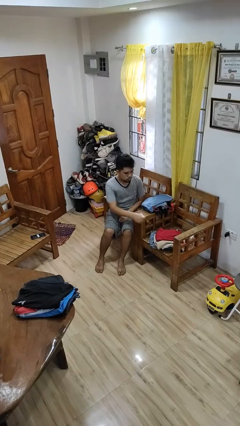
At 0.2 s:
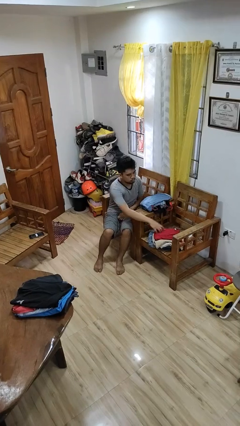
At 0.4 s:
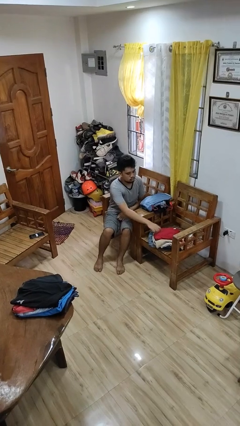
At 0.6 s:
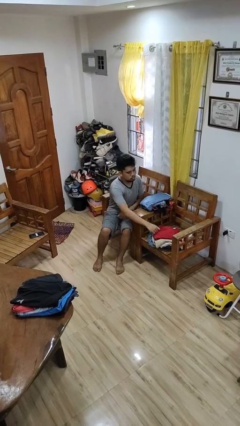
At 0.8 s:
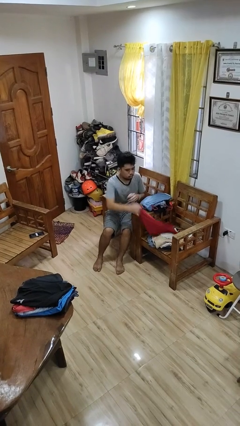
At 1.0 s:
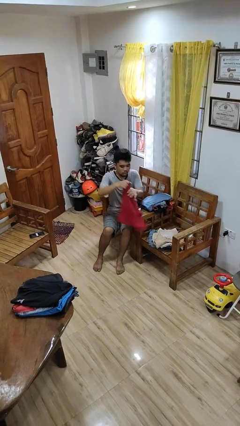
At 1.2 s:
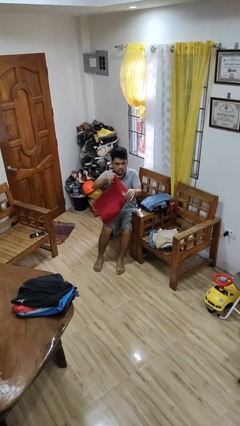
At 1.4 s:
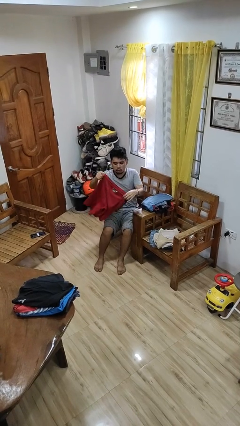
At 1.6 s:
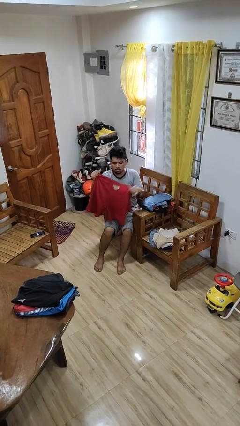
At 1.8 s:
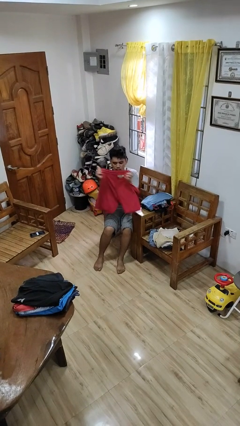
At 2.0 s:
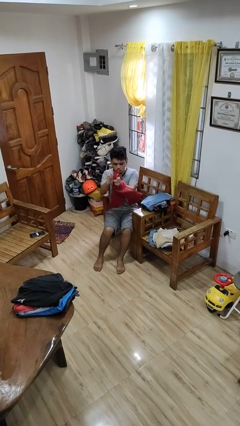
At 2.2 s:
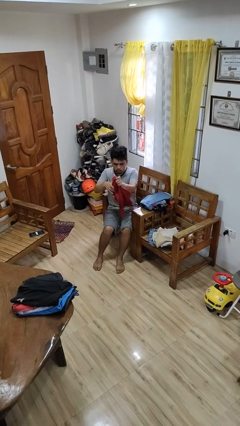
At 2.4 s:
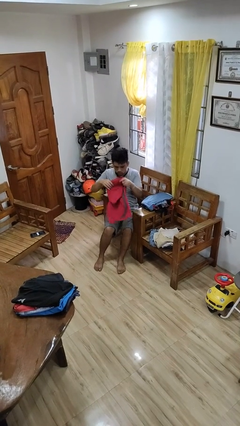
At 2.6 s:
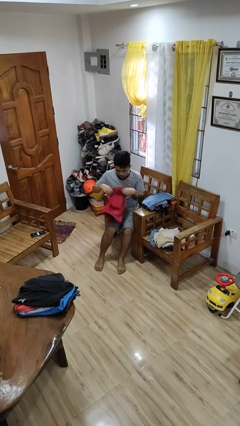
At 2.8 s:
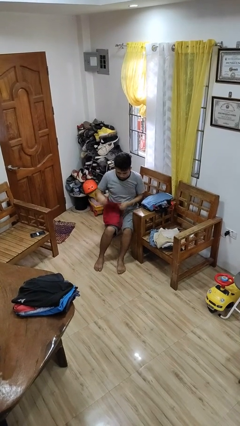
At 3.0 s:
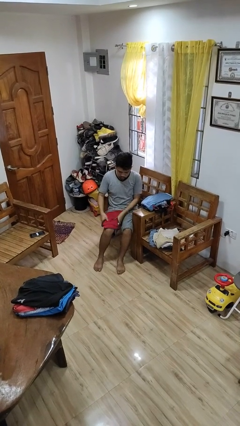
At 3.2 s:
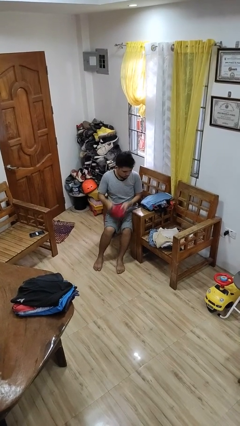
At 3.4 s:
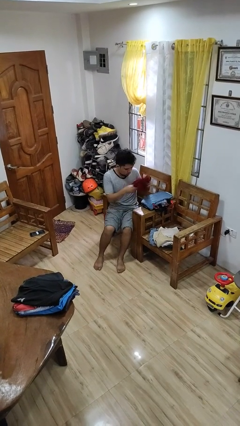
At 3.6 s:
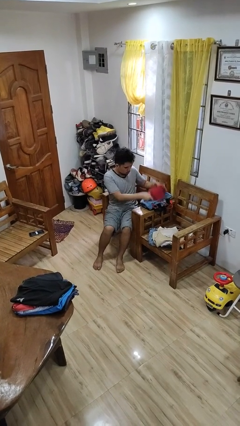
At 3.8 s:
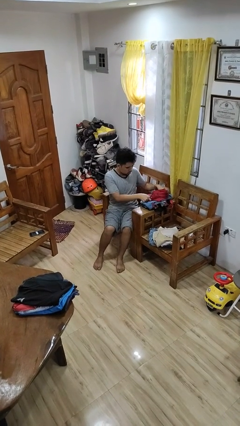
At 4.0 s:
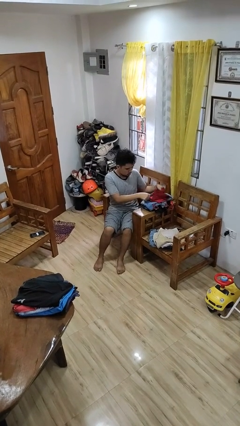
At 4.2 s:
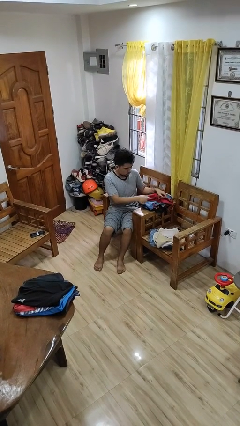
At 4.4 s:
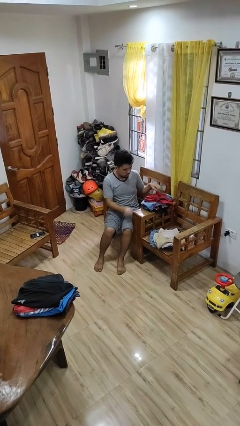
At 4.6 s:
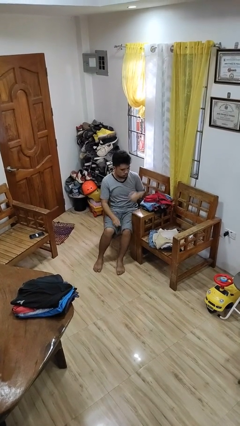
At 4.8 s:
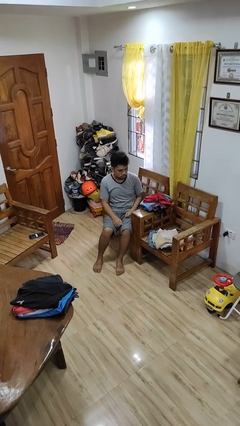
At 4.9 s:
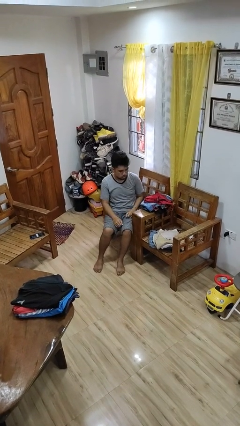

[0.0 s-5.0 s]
person folds pants

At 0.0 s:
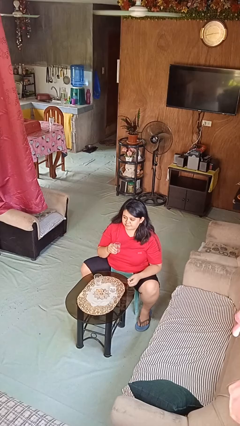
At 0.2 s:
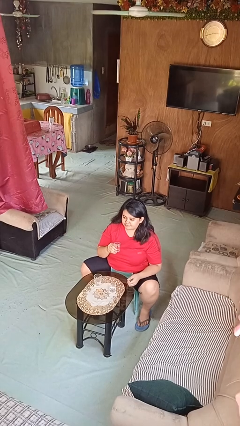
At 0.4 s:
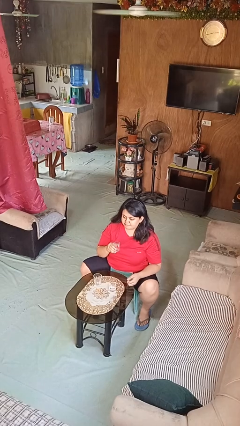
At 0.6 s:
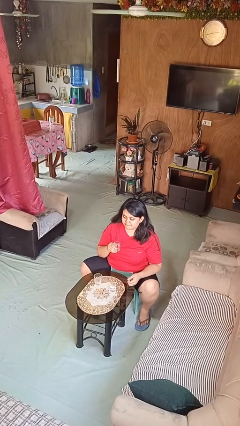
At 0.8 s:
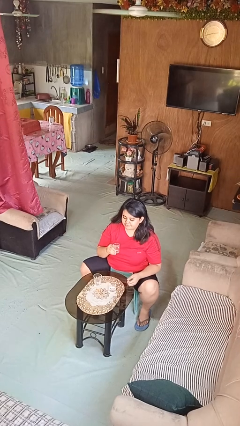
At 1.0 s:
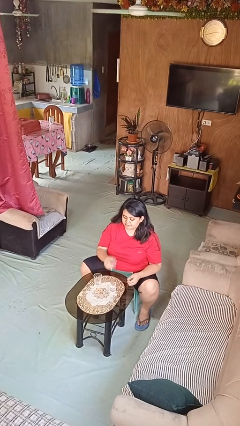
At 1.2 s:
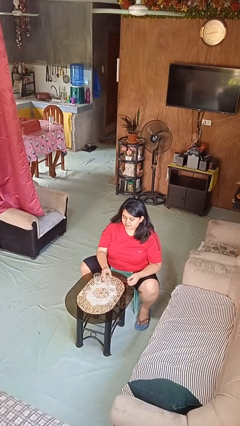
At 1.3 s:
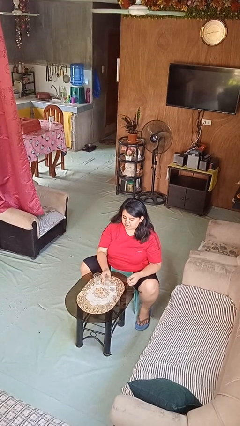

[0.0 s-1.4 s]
person puts down object on table

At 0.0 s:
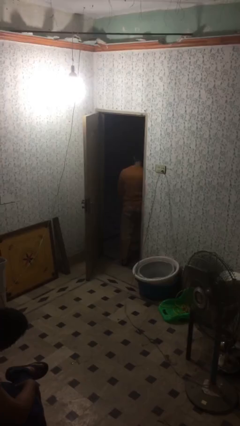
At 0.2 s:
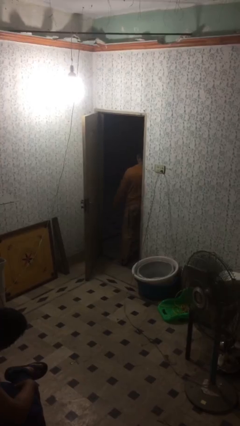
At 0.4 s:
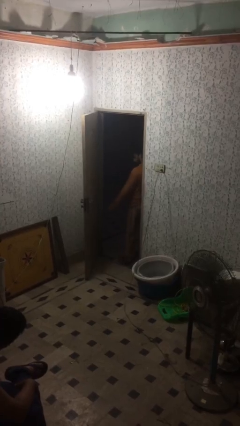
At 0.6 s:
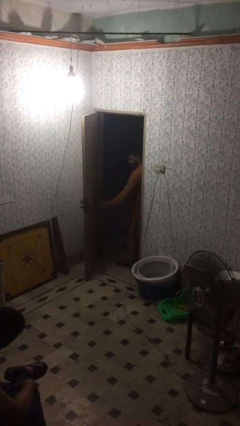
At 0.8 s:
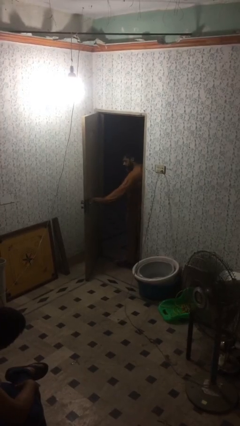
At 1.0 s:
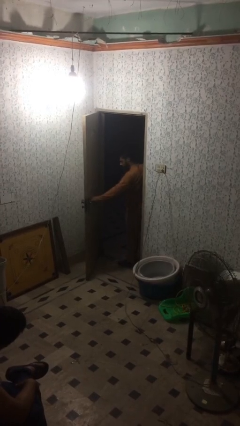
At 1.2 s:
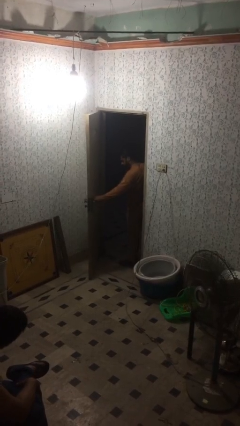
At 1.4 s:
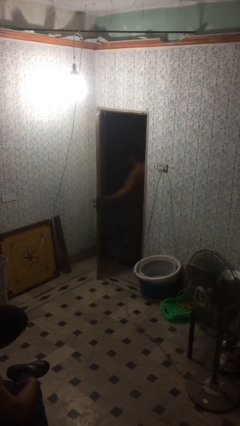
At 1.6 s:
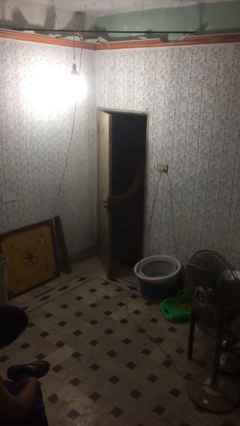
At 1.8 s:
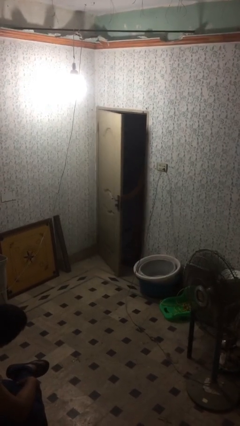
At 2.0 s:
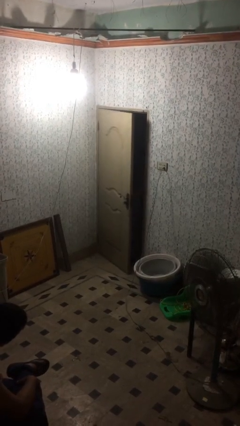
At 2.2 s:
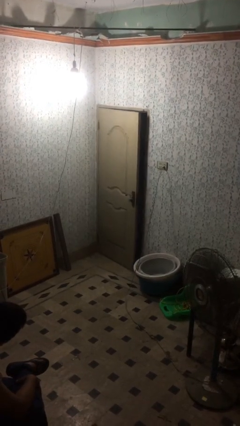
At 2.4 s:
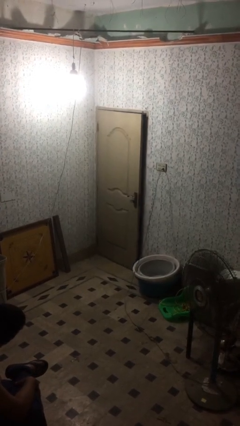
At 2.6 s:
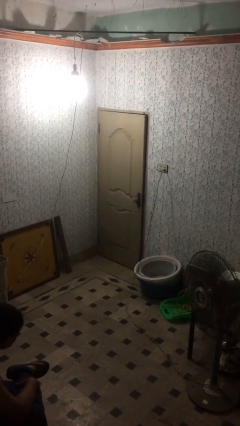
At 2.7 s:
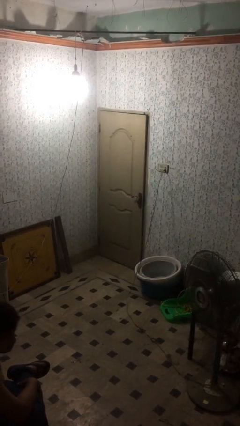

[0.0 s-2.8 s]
person closes facility door

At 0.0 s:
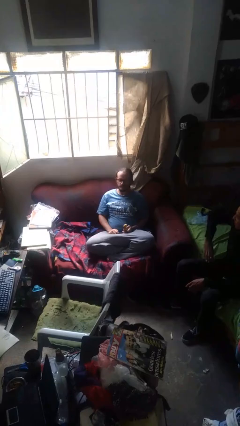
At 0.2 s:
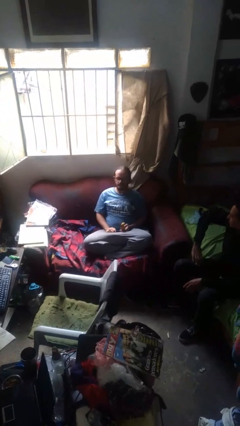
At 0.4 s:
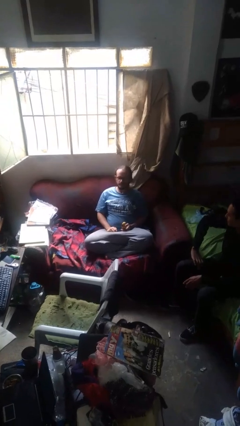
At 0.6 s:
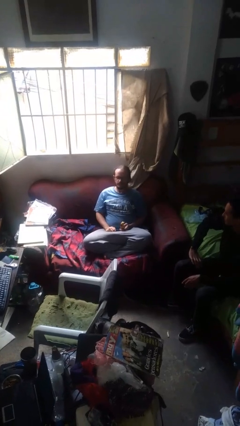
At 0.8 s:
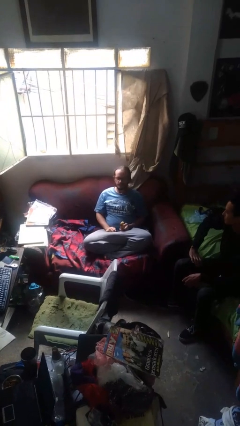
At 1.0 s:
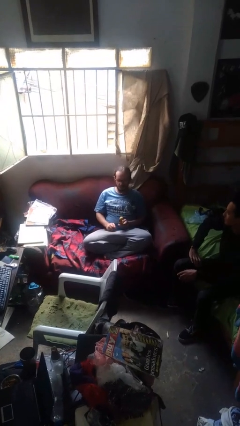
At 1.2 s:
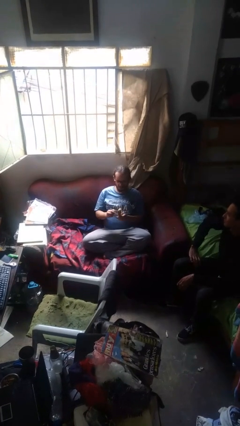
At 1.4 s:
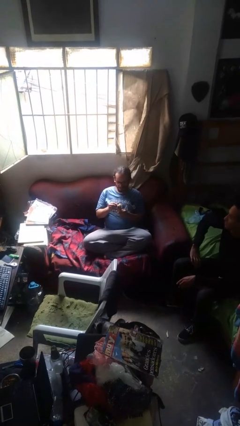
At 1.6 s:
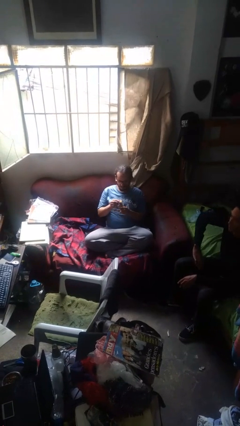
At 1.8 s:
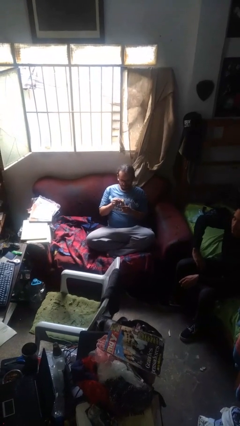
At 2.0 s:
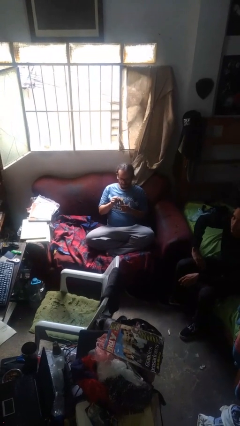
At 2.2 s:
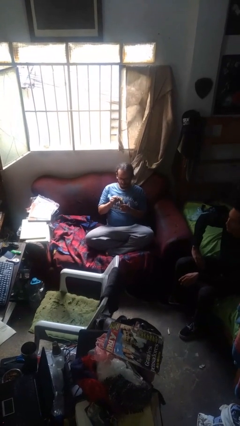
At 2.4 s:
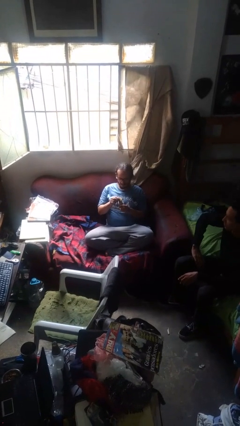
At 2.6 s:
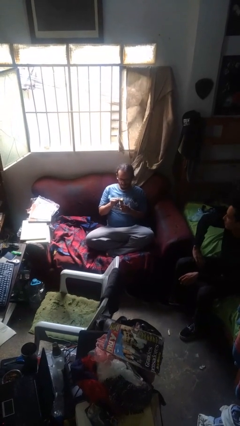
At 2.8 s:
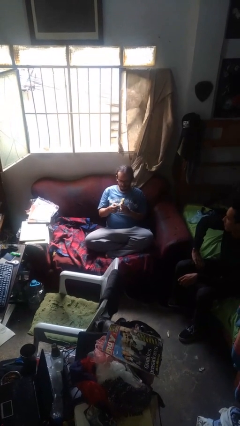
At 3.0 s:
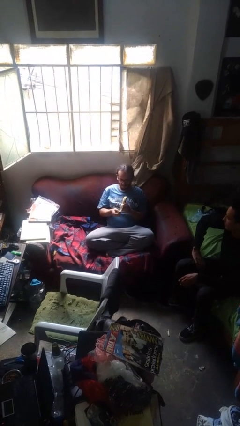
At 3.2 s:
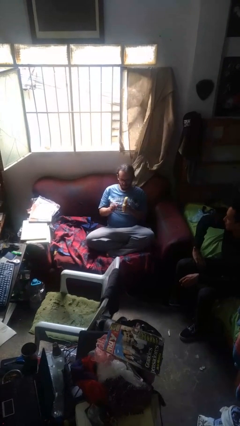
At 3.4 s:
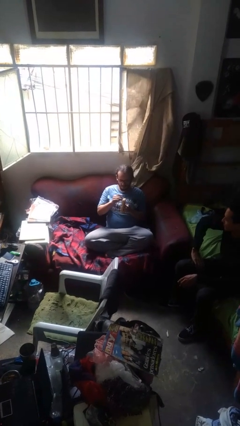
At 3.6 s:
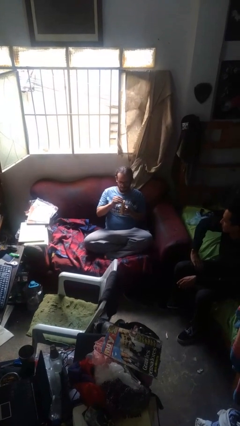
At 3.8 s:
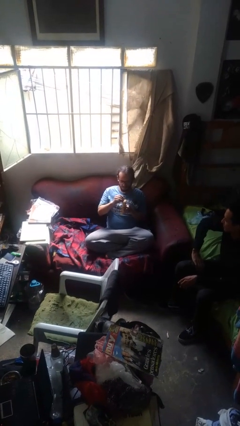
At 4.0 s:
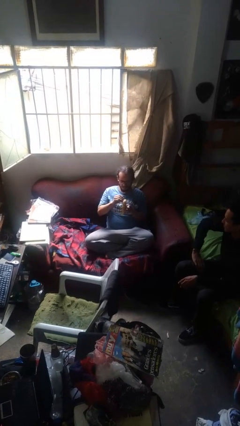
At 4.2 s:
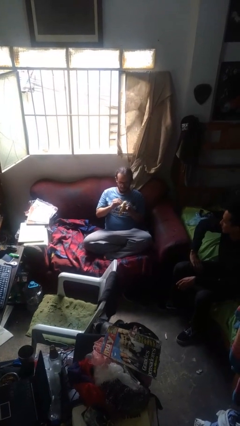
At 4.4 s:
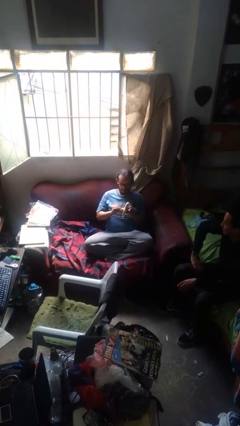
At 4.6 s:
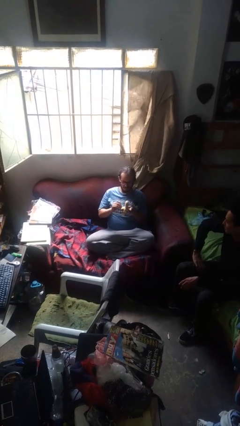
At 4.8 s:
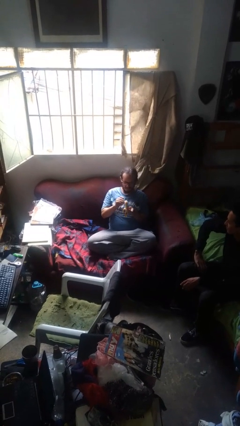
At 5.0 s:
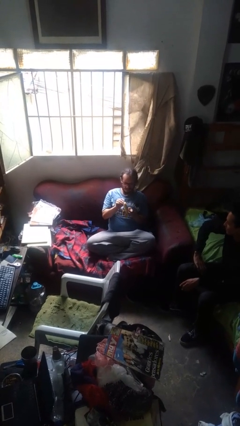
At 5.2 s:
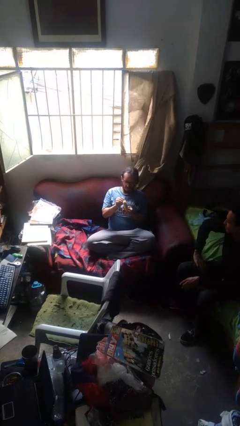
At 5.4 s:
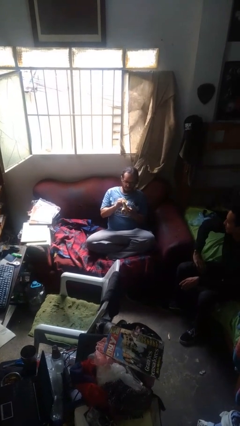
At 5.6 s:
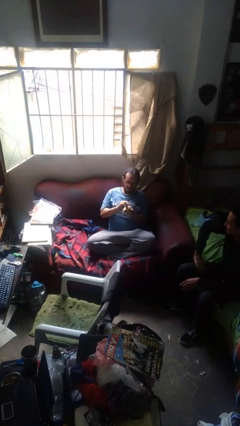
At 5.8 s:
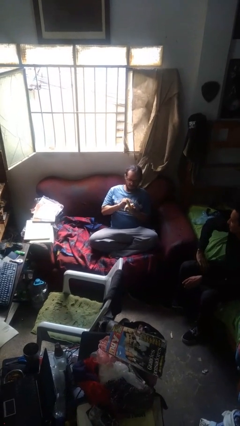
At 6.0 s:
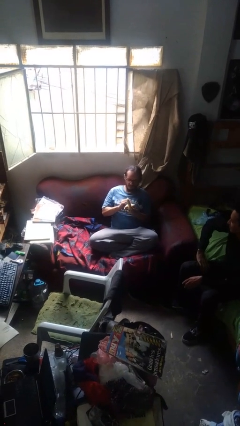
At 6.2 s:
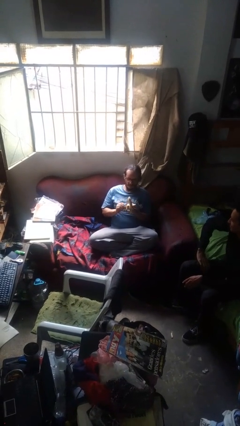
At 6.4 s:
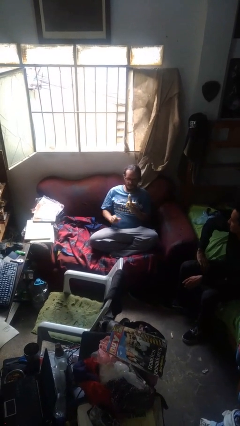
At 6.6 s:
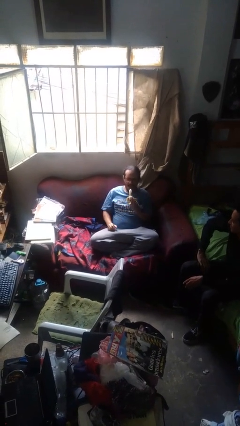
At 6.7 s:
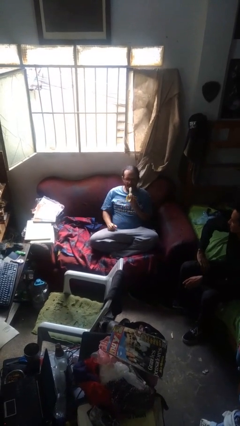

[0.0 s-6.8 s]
person eats banana

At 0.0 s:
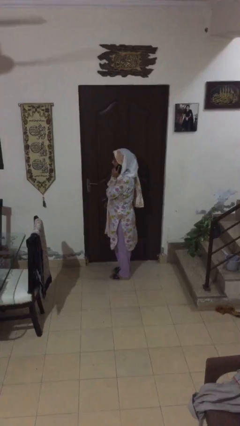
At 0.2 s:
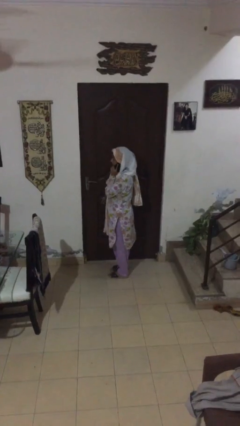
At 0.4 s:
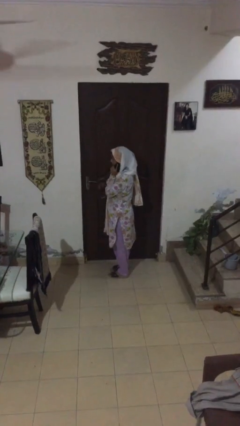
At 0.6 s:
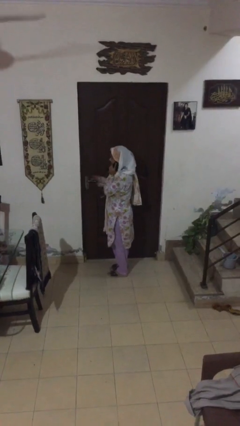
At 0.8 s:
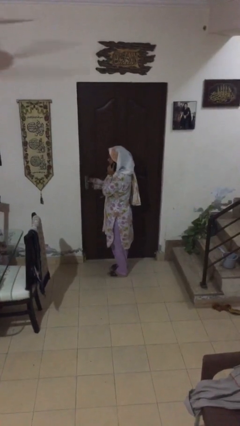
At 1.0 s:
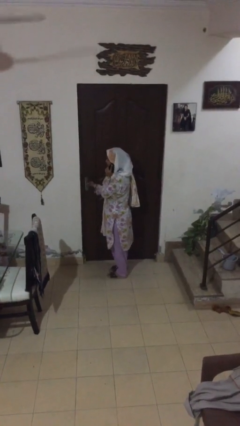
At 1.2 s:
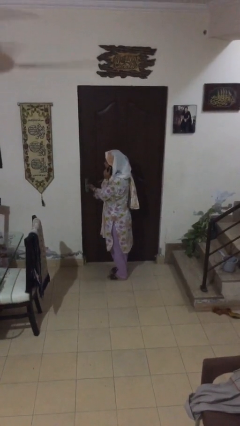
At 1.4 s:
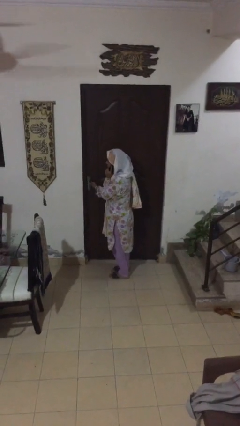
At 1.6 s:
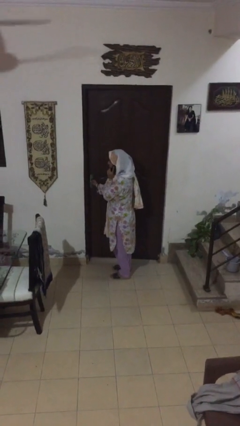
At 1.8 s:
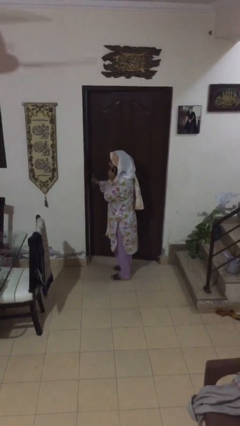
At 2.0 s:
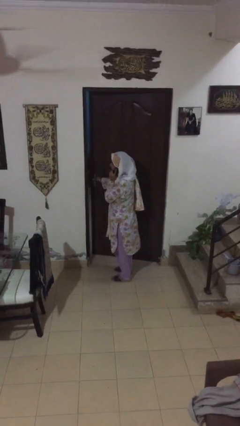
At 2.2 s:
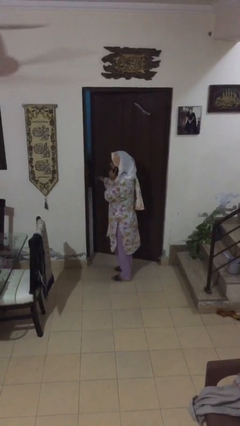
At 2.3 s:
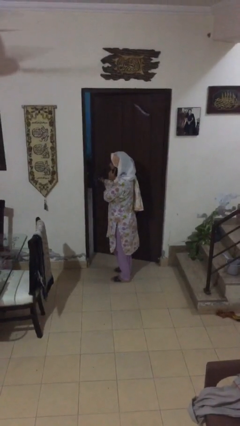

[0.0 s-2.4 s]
person opens facility door
